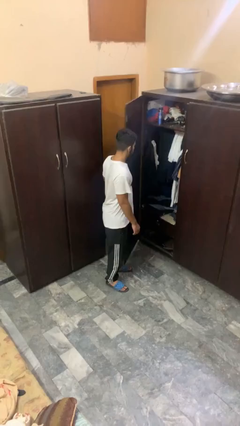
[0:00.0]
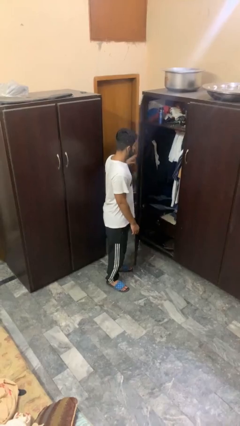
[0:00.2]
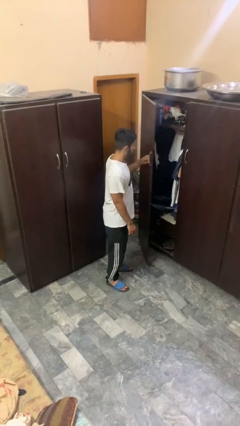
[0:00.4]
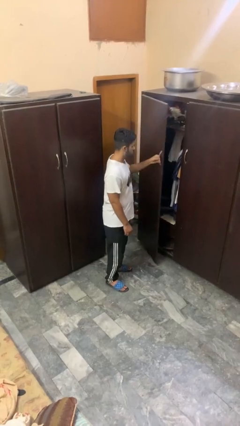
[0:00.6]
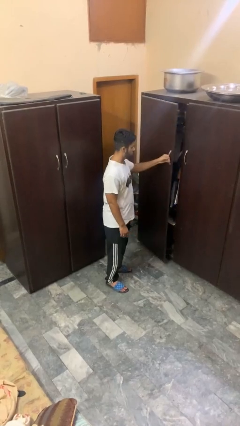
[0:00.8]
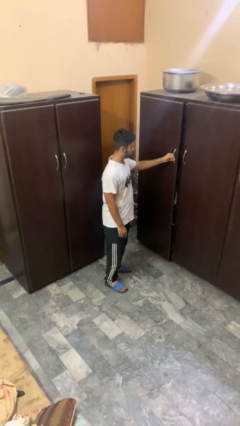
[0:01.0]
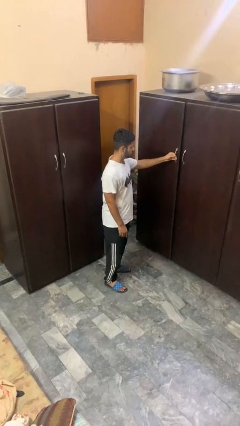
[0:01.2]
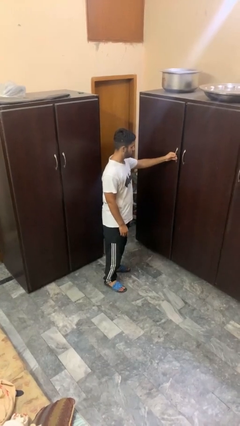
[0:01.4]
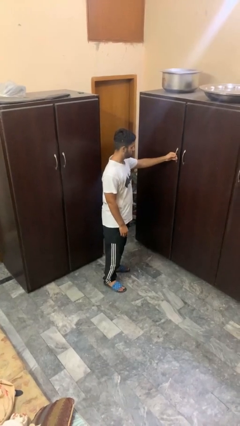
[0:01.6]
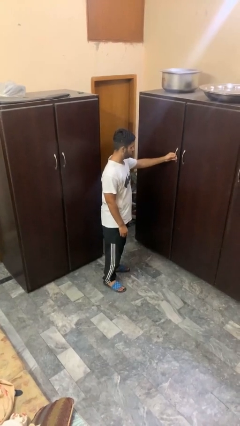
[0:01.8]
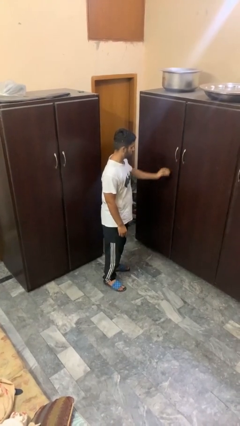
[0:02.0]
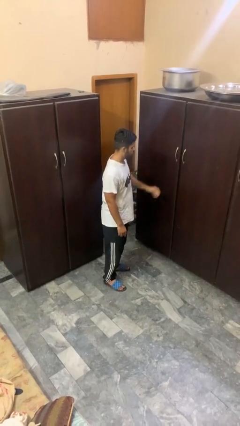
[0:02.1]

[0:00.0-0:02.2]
person closes closet door

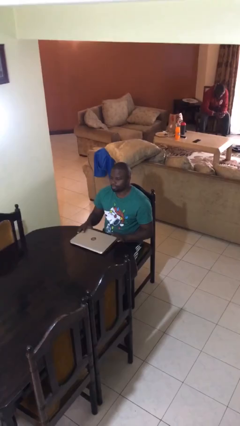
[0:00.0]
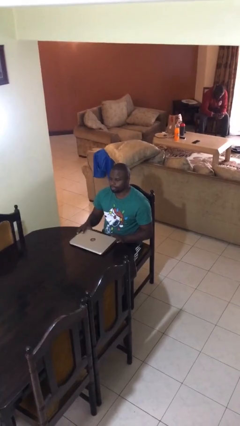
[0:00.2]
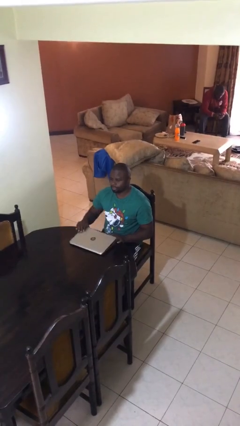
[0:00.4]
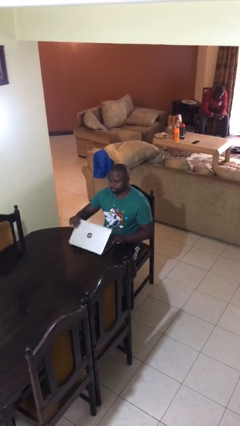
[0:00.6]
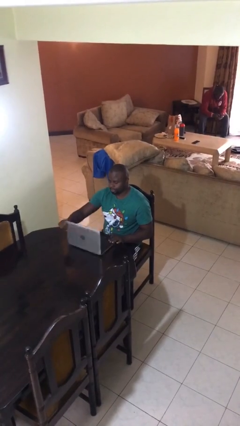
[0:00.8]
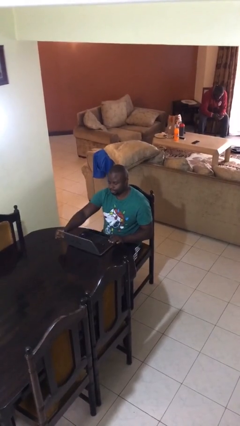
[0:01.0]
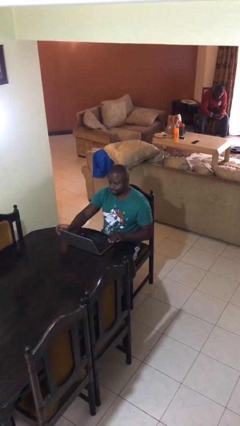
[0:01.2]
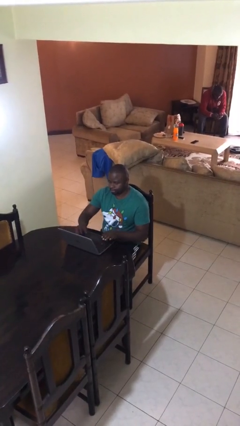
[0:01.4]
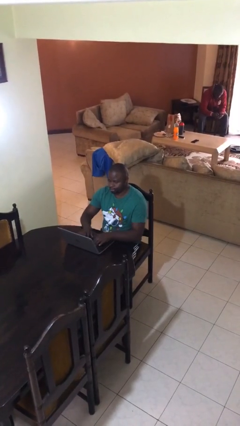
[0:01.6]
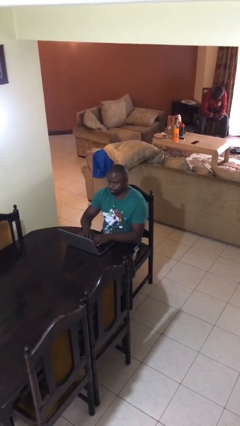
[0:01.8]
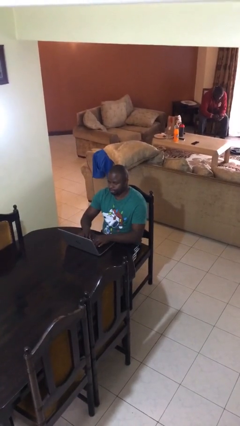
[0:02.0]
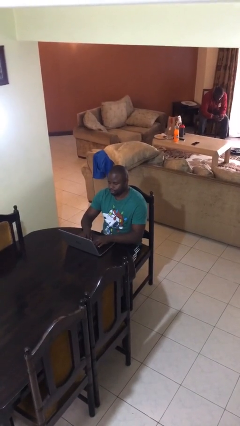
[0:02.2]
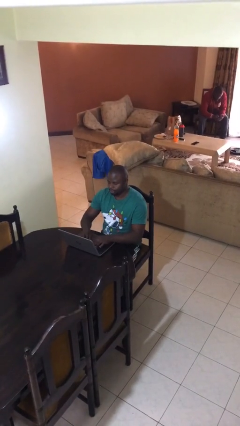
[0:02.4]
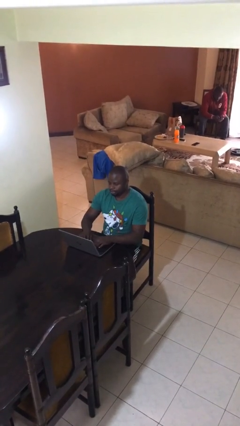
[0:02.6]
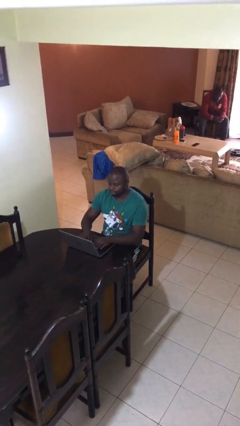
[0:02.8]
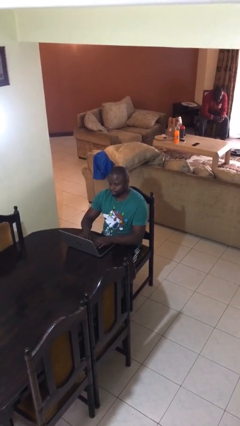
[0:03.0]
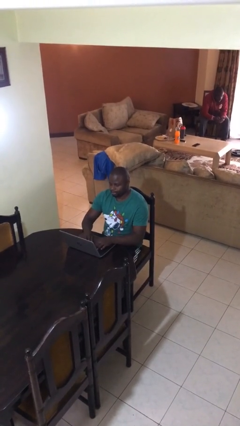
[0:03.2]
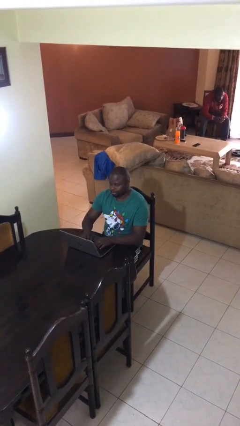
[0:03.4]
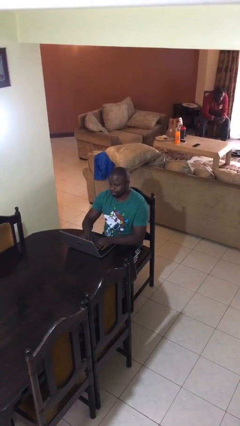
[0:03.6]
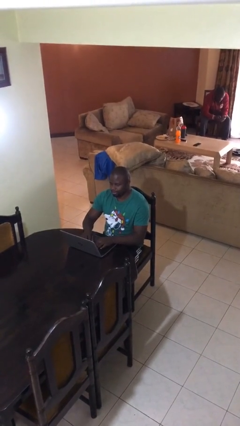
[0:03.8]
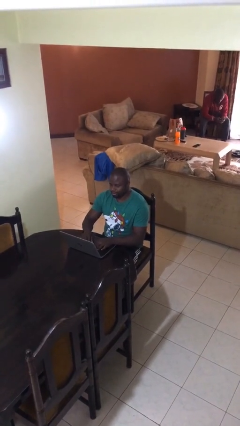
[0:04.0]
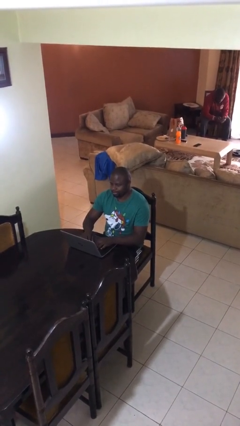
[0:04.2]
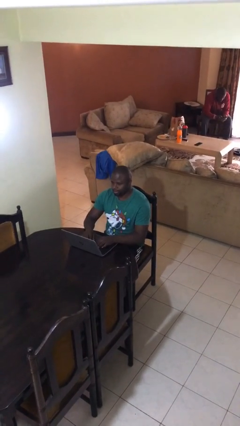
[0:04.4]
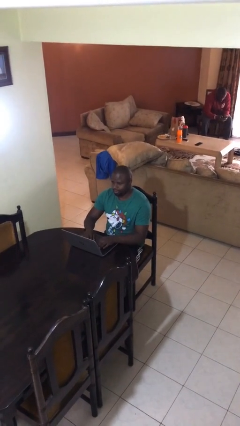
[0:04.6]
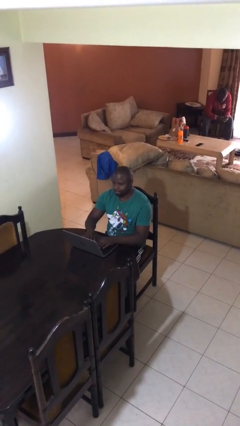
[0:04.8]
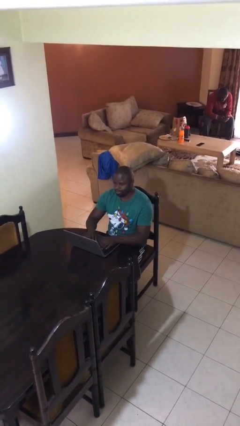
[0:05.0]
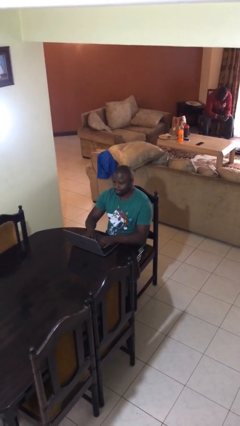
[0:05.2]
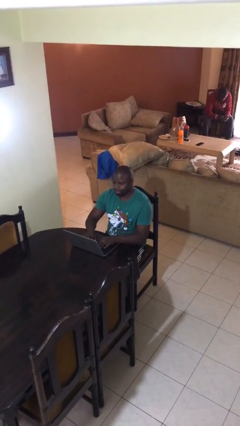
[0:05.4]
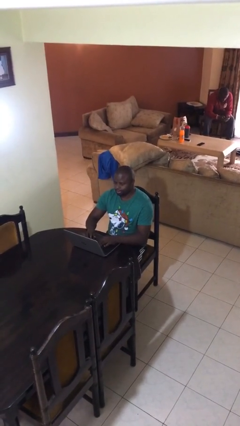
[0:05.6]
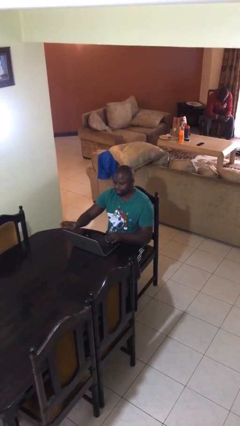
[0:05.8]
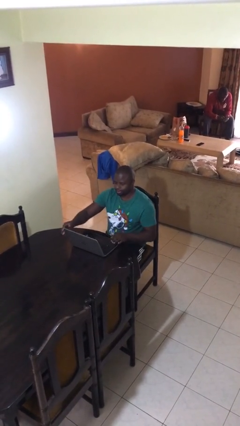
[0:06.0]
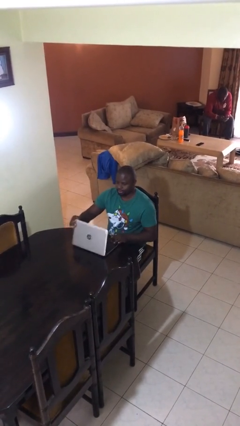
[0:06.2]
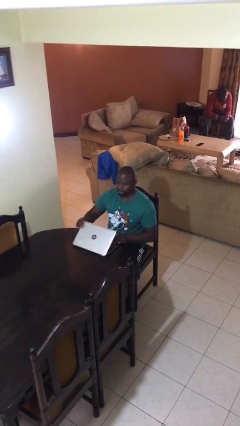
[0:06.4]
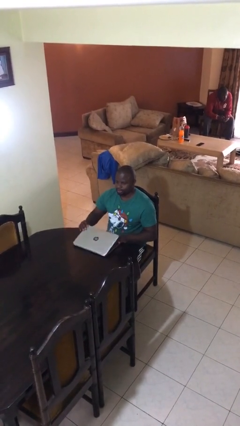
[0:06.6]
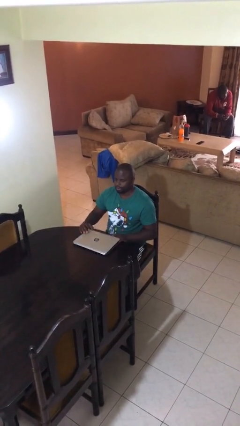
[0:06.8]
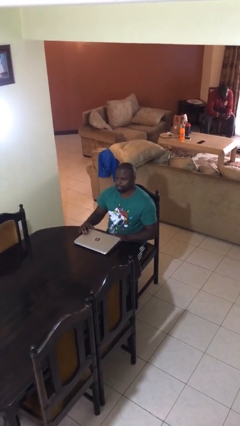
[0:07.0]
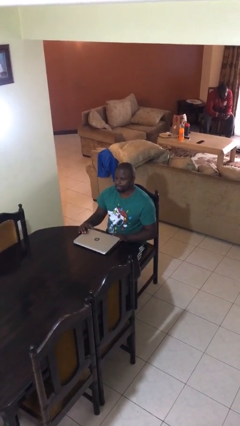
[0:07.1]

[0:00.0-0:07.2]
person interacts with laptop

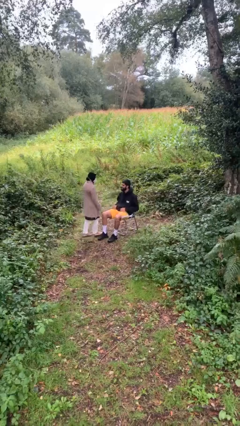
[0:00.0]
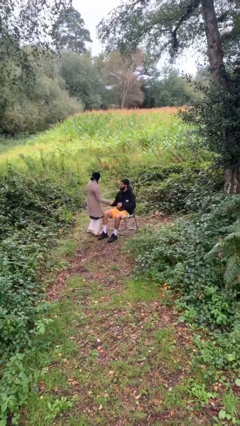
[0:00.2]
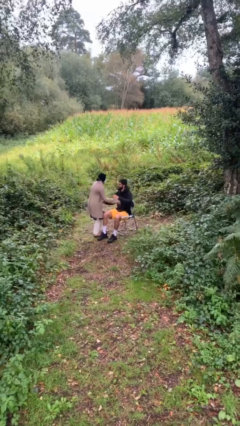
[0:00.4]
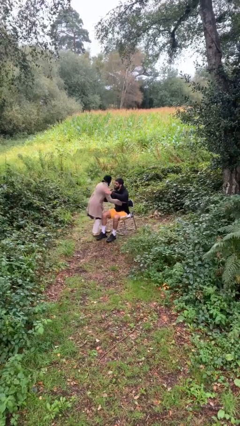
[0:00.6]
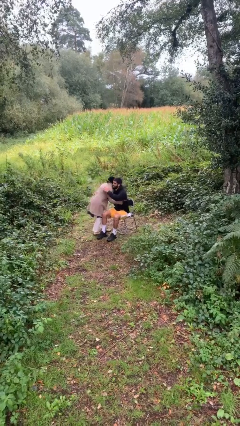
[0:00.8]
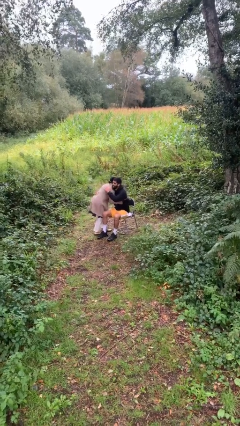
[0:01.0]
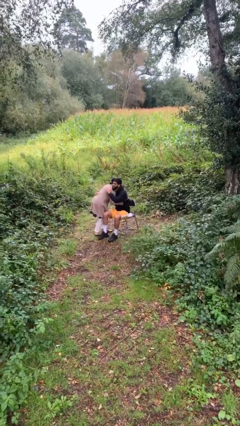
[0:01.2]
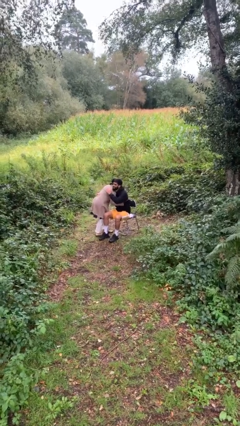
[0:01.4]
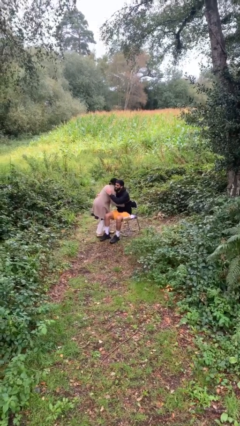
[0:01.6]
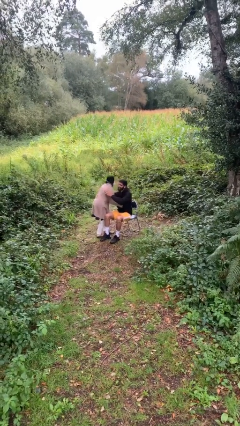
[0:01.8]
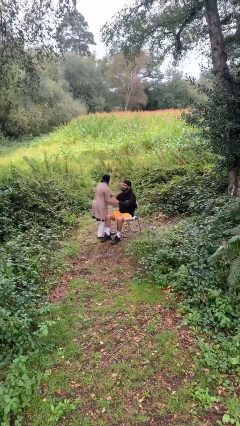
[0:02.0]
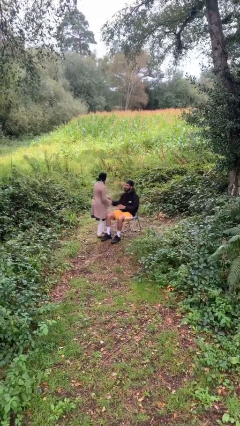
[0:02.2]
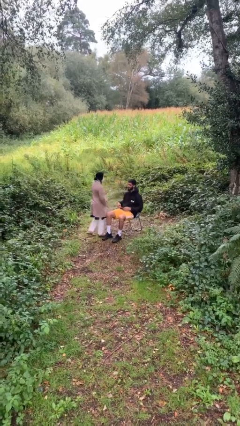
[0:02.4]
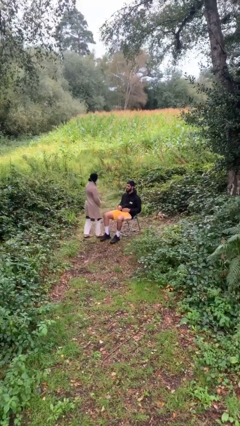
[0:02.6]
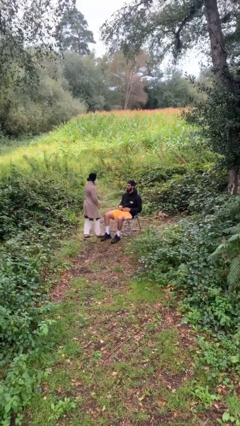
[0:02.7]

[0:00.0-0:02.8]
person embraces person

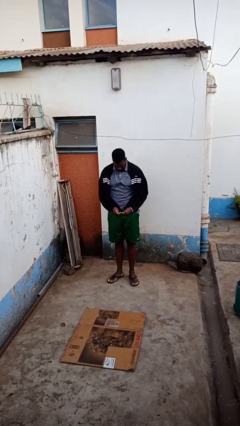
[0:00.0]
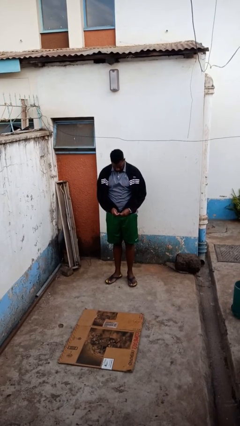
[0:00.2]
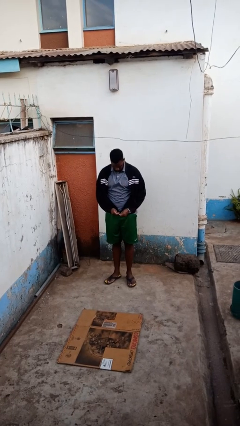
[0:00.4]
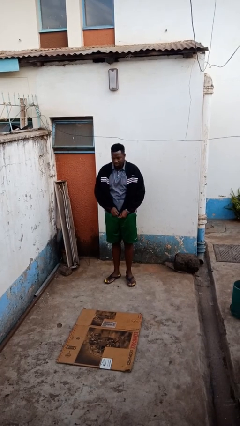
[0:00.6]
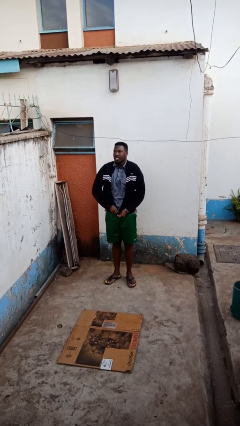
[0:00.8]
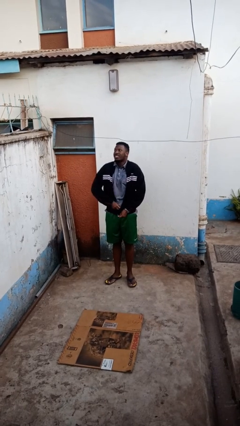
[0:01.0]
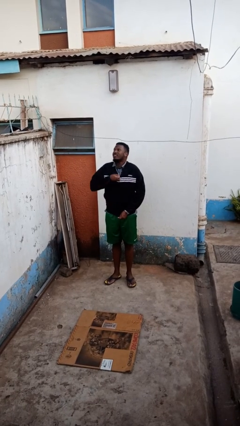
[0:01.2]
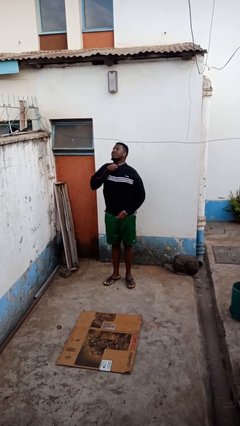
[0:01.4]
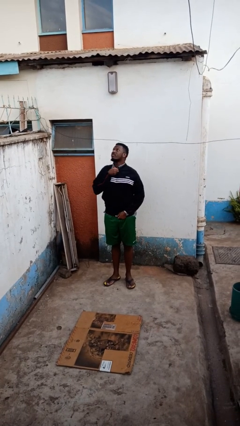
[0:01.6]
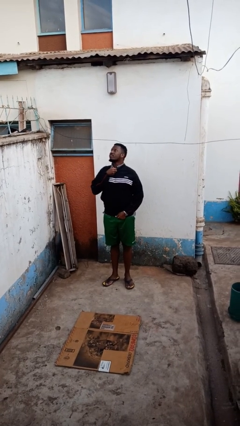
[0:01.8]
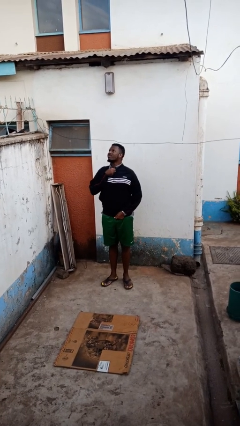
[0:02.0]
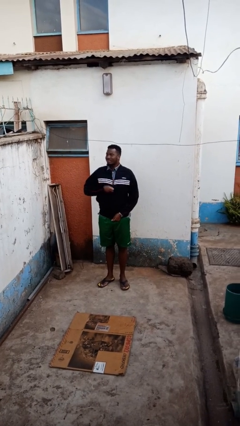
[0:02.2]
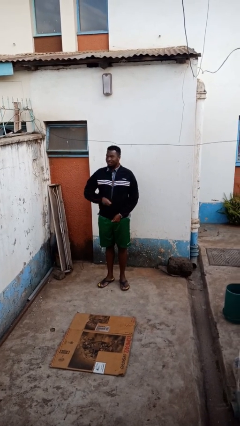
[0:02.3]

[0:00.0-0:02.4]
person zips up jacket

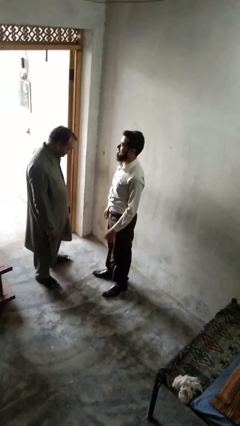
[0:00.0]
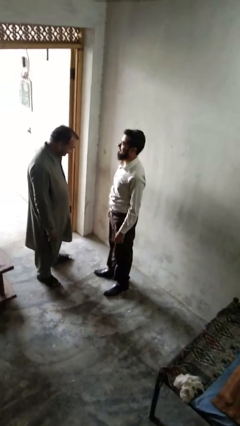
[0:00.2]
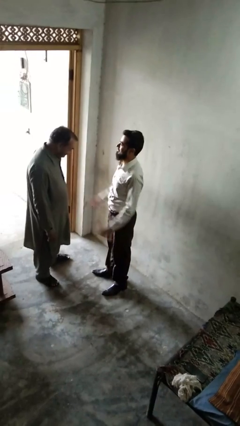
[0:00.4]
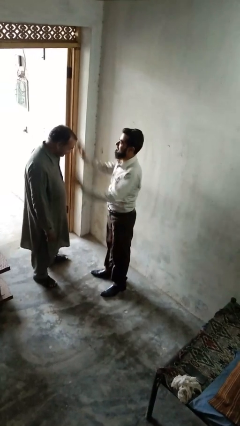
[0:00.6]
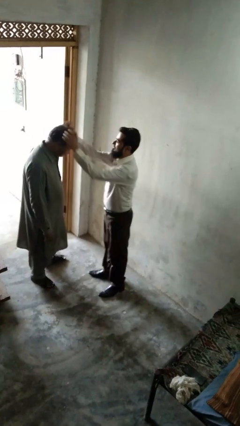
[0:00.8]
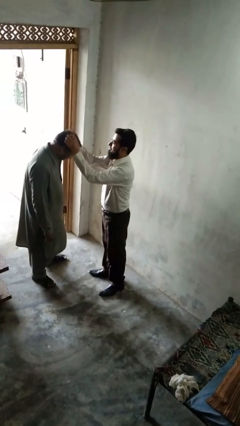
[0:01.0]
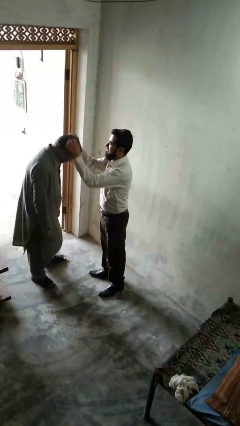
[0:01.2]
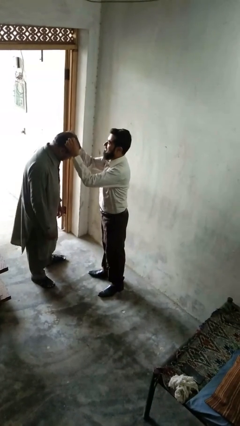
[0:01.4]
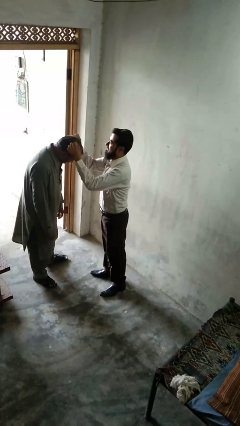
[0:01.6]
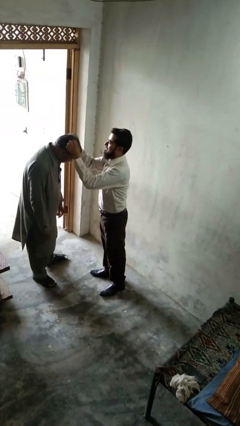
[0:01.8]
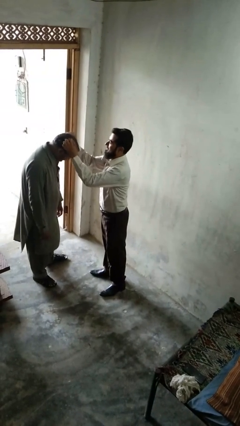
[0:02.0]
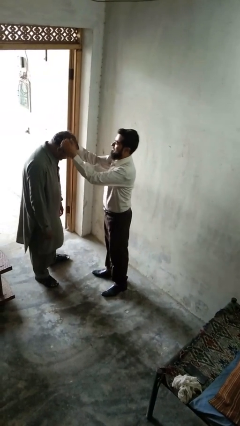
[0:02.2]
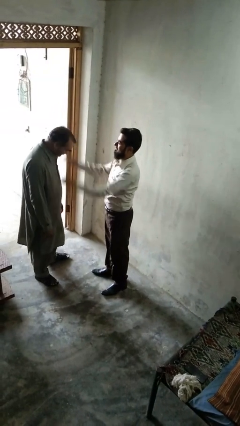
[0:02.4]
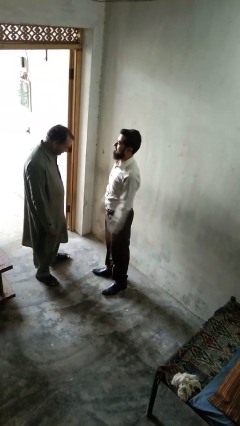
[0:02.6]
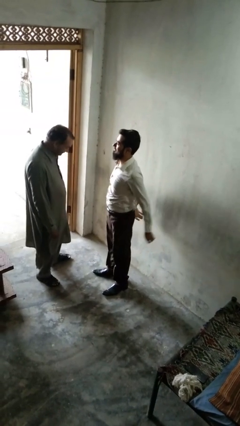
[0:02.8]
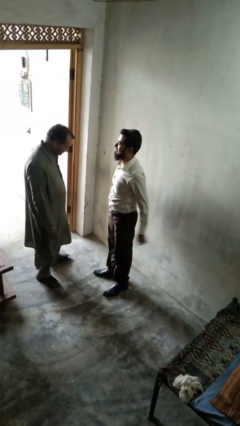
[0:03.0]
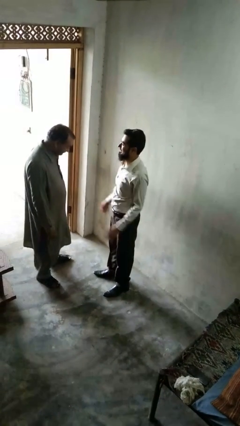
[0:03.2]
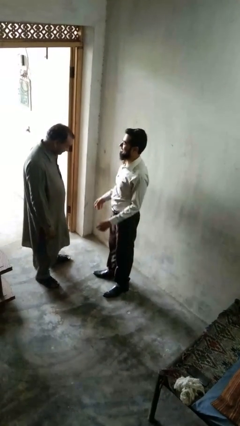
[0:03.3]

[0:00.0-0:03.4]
person grabs person by hair
